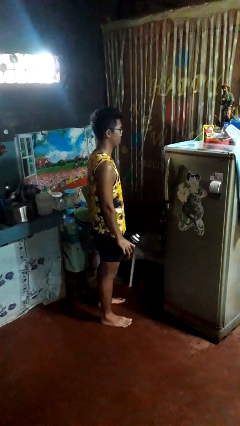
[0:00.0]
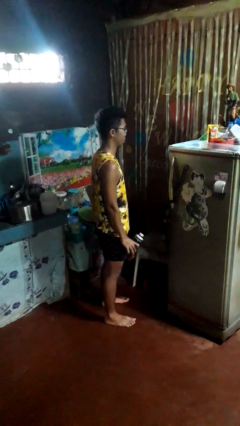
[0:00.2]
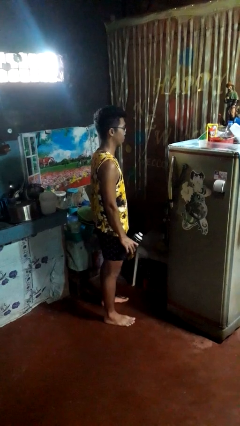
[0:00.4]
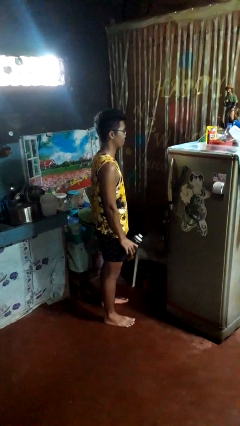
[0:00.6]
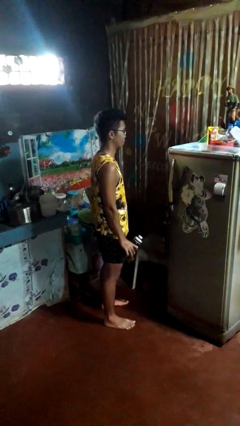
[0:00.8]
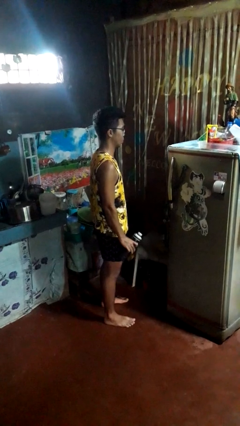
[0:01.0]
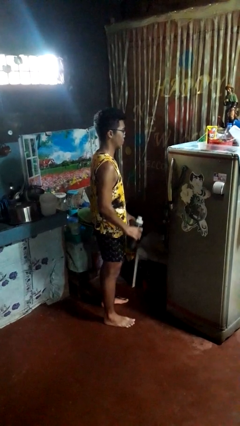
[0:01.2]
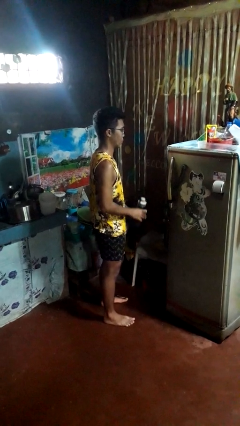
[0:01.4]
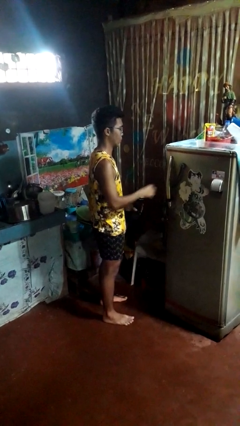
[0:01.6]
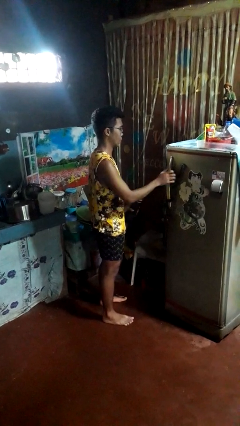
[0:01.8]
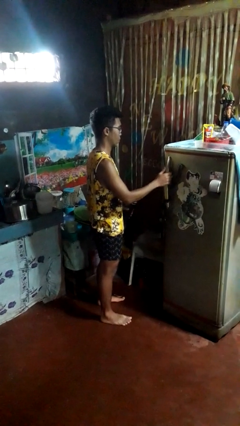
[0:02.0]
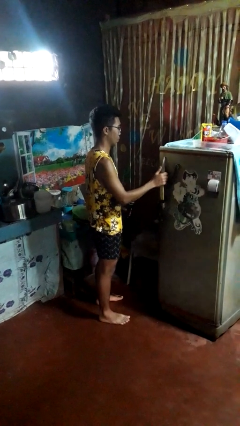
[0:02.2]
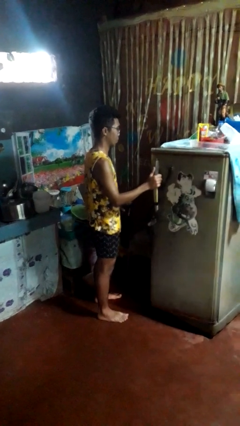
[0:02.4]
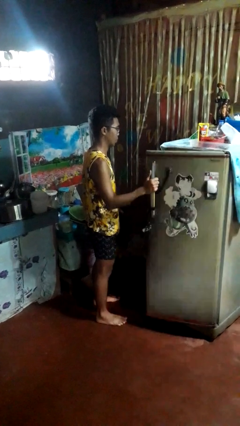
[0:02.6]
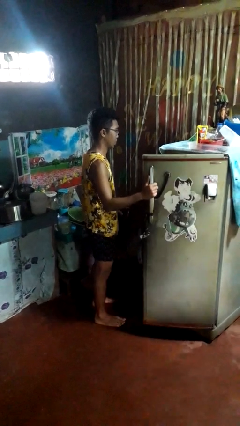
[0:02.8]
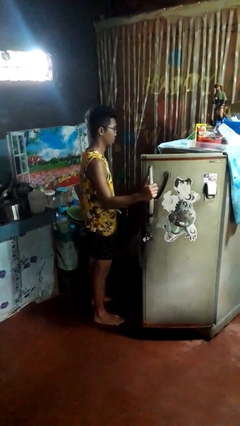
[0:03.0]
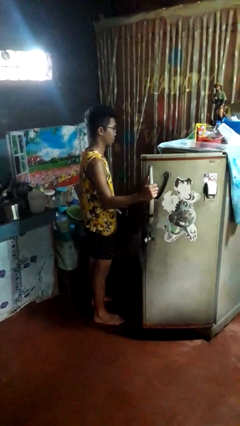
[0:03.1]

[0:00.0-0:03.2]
person opens refrigerator

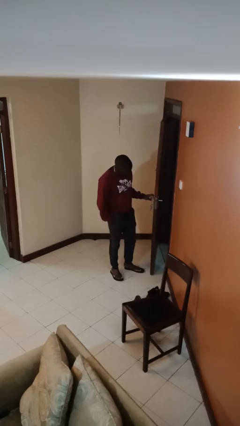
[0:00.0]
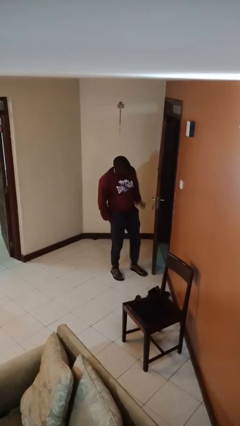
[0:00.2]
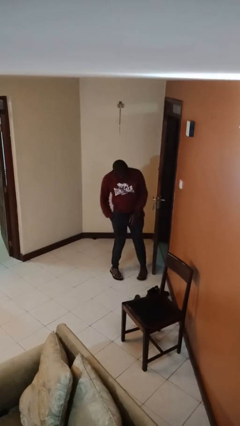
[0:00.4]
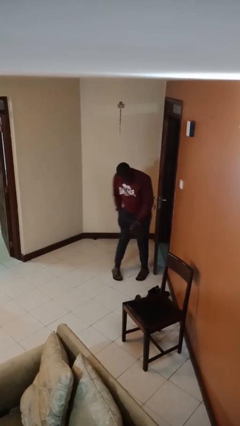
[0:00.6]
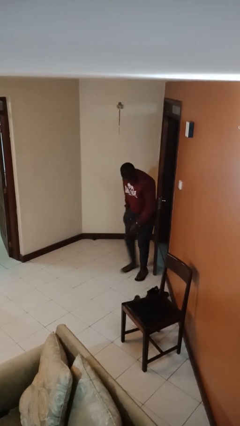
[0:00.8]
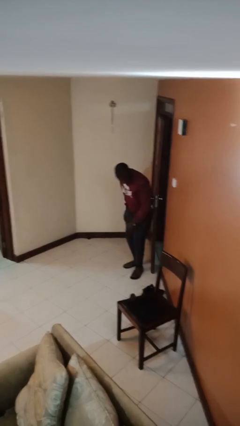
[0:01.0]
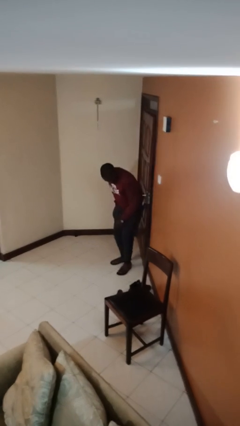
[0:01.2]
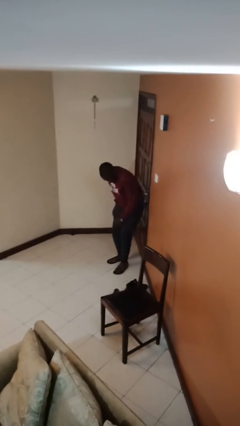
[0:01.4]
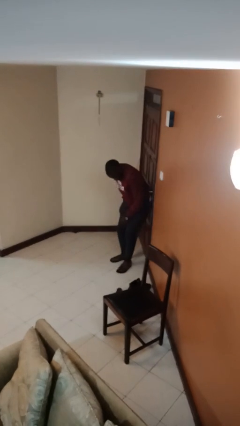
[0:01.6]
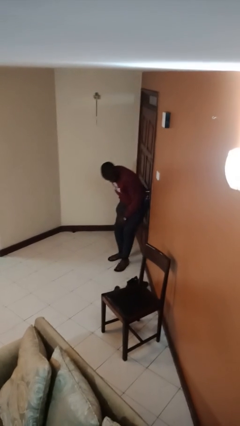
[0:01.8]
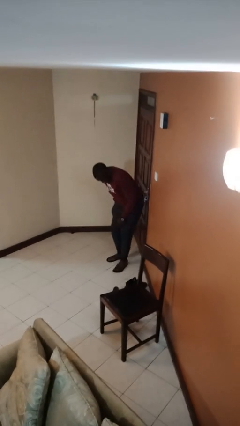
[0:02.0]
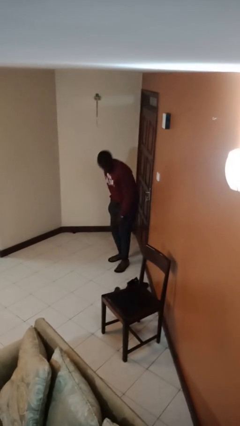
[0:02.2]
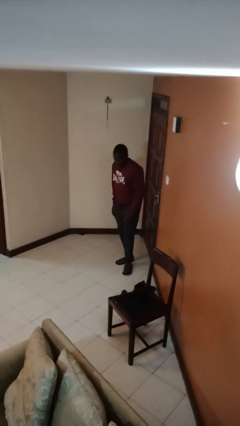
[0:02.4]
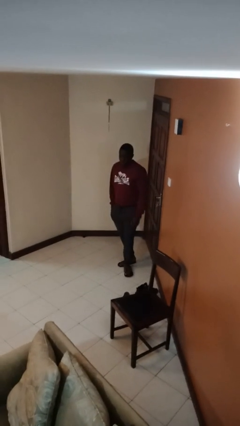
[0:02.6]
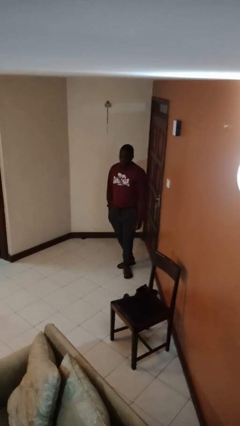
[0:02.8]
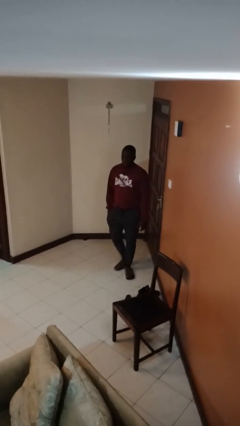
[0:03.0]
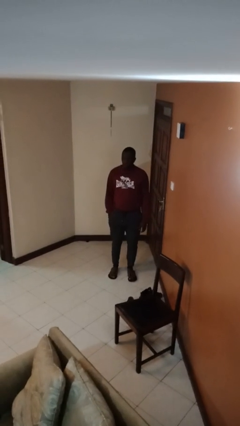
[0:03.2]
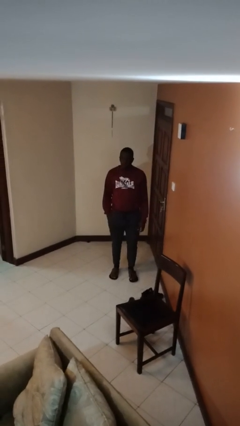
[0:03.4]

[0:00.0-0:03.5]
person closes door with hip

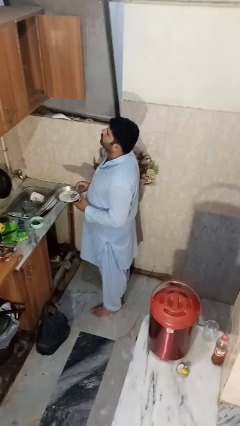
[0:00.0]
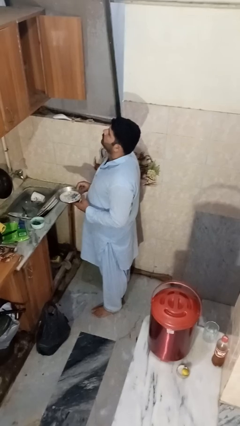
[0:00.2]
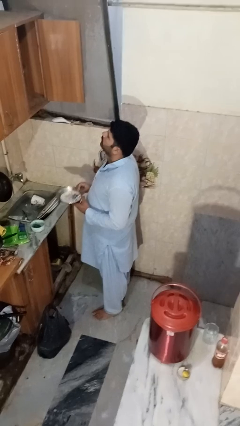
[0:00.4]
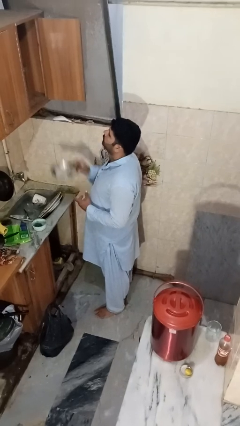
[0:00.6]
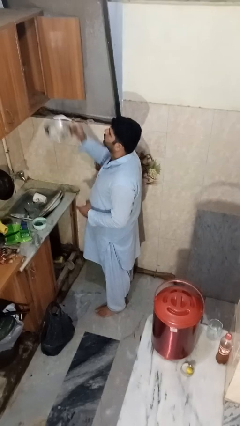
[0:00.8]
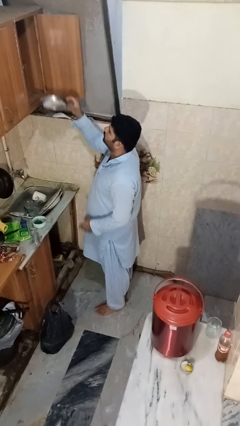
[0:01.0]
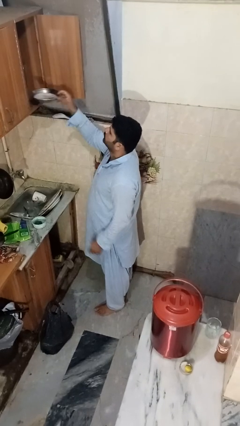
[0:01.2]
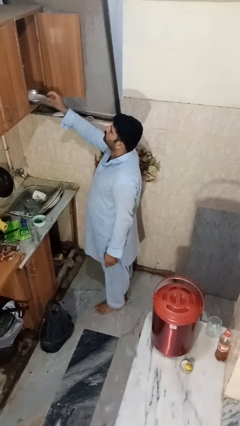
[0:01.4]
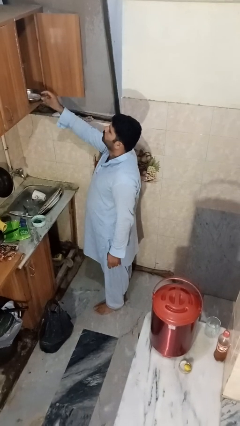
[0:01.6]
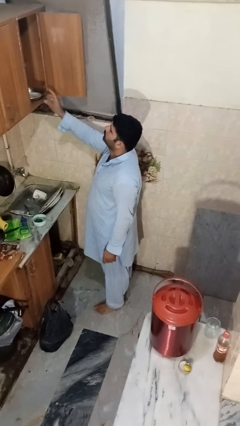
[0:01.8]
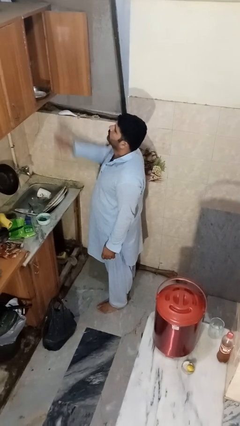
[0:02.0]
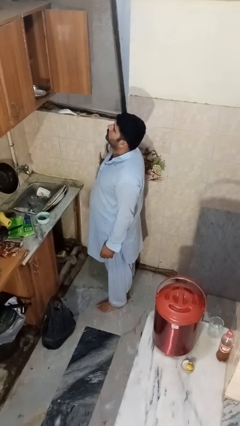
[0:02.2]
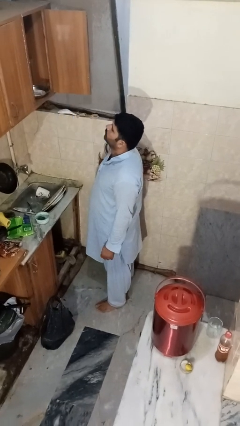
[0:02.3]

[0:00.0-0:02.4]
person puts object in cabinet

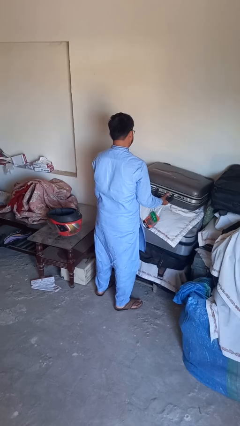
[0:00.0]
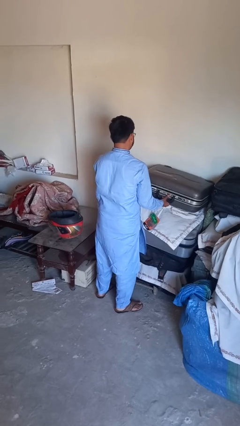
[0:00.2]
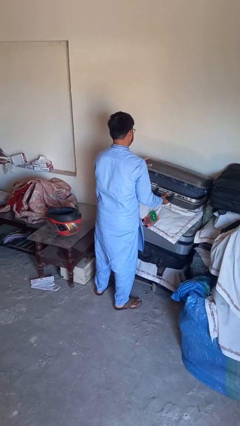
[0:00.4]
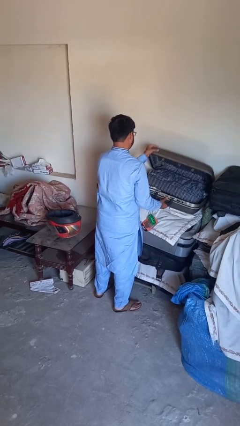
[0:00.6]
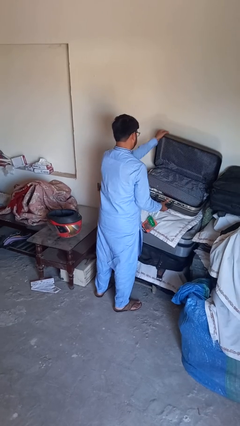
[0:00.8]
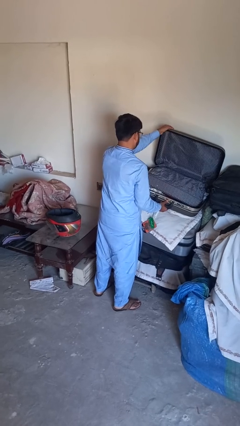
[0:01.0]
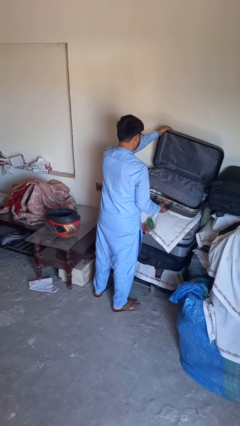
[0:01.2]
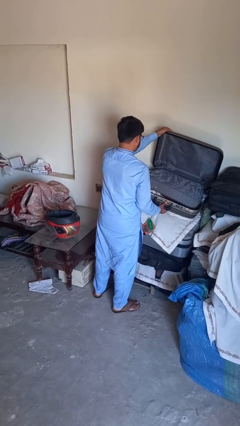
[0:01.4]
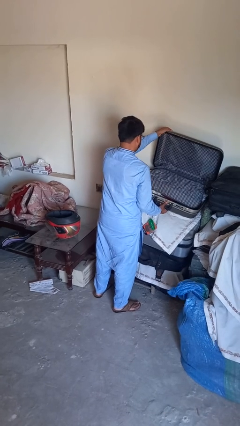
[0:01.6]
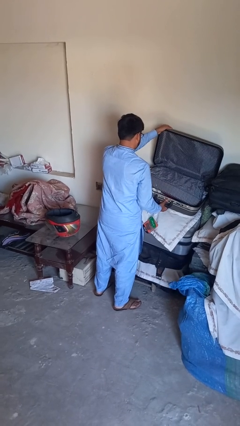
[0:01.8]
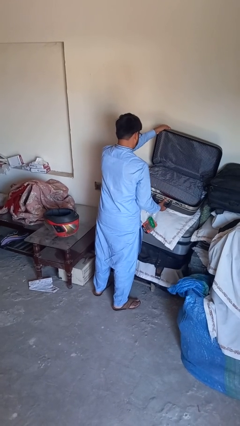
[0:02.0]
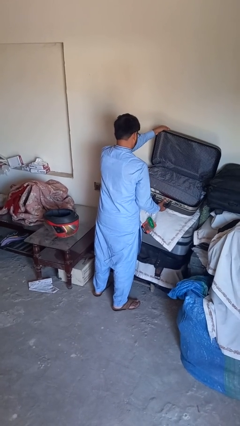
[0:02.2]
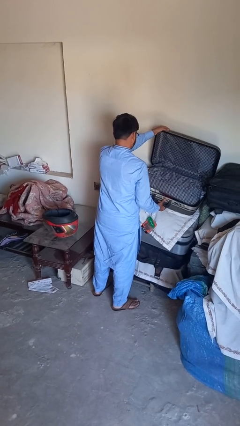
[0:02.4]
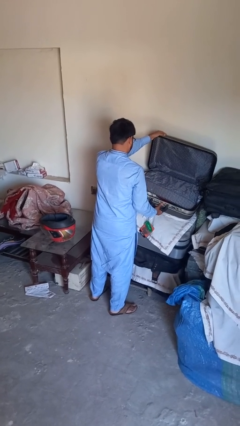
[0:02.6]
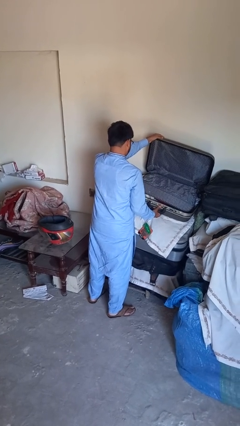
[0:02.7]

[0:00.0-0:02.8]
person opens suitcase

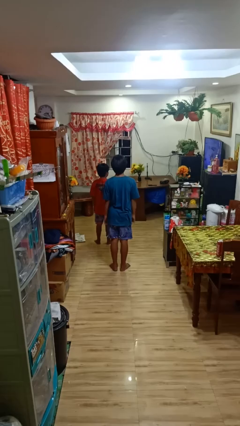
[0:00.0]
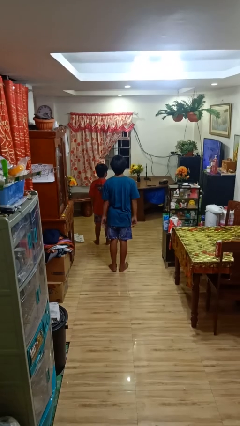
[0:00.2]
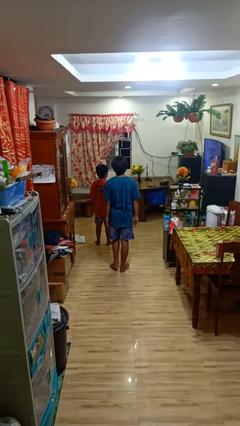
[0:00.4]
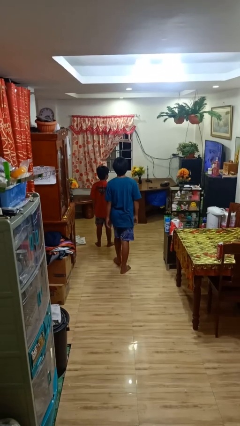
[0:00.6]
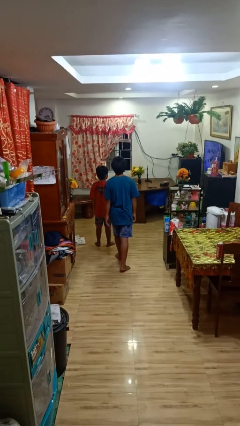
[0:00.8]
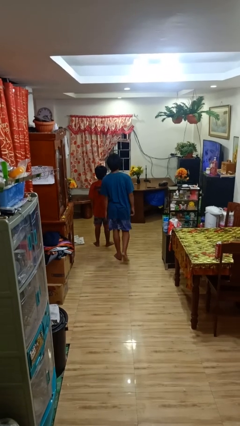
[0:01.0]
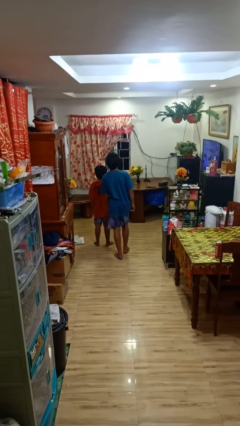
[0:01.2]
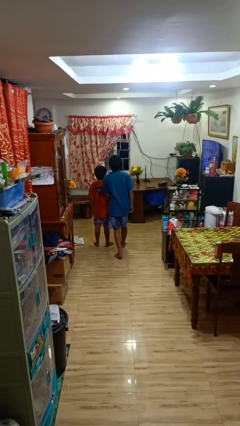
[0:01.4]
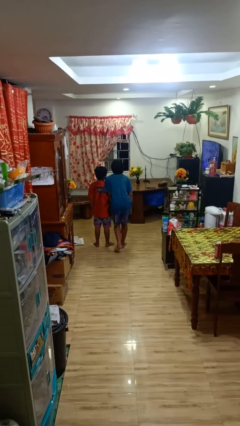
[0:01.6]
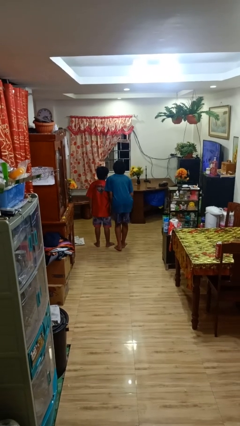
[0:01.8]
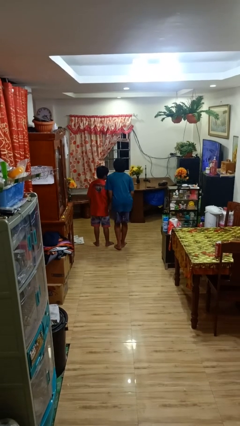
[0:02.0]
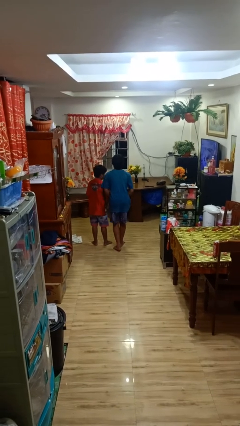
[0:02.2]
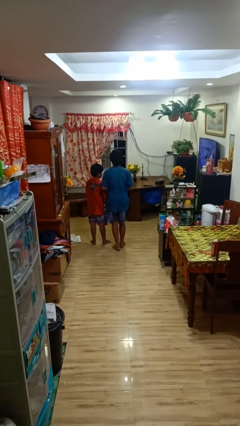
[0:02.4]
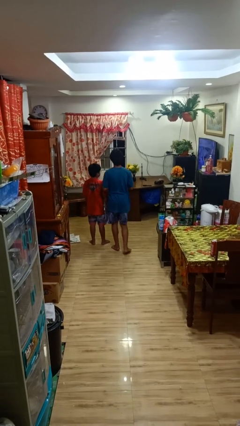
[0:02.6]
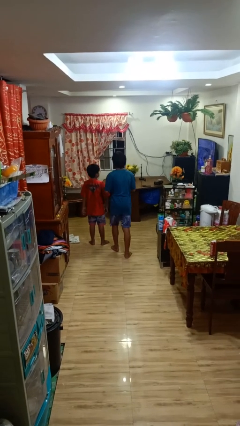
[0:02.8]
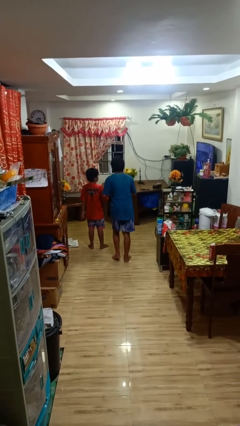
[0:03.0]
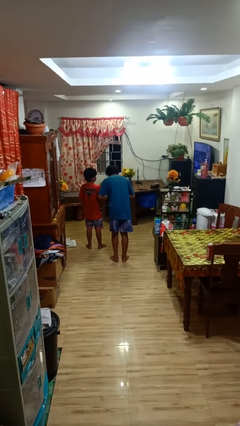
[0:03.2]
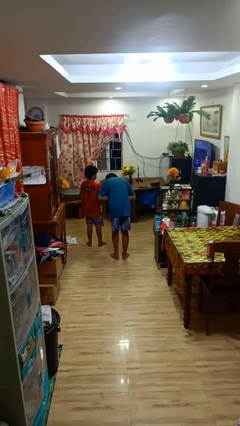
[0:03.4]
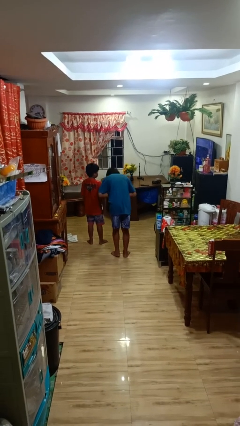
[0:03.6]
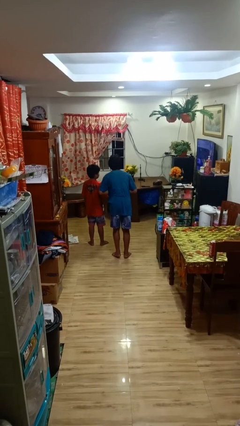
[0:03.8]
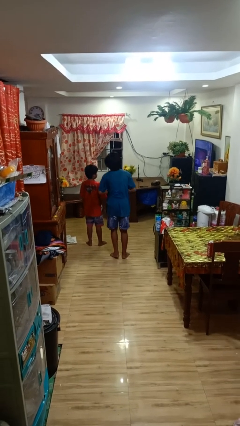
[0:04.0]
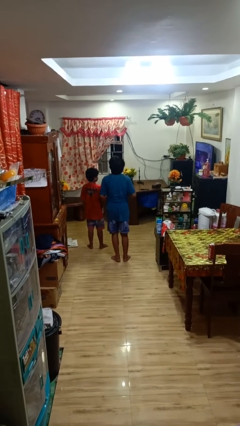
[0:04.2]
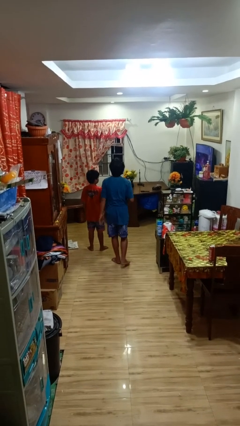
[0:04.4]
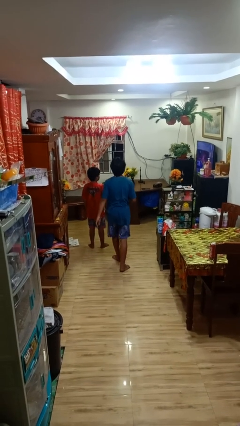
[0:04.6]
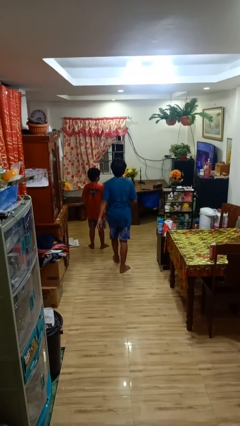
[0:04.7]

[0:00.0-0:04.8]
person bumps into person

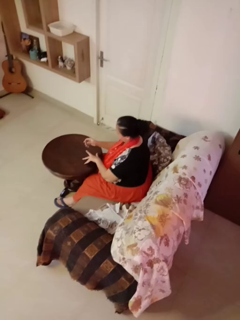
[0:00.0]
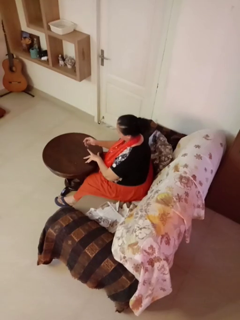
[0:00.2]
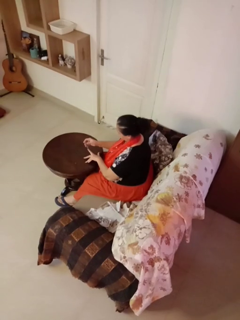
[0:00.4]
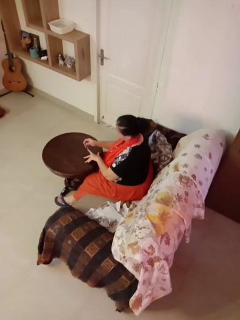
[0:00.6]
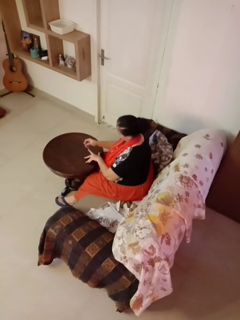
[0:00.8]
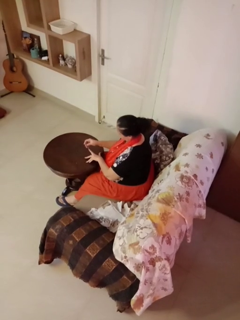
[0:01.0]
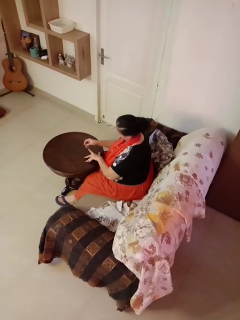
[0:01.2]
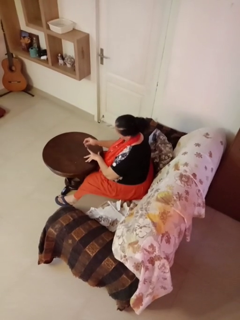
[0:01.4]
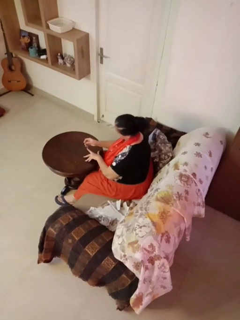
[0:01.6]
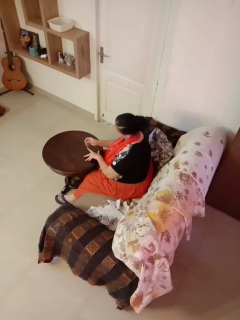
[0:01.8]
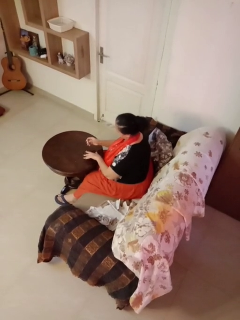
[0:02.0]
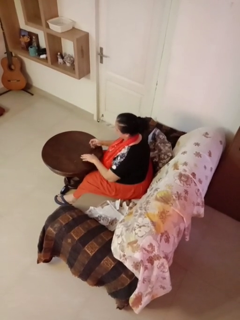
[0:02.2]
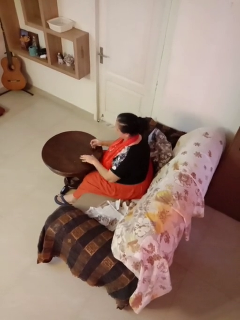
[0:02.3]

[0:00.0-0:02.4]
person clips fingernails
